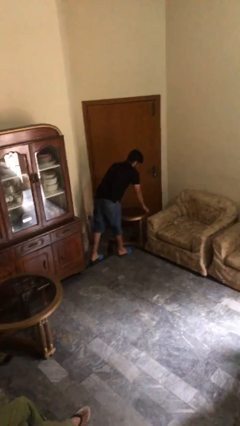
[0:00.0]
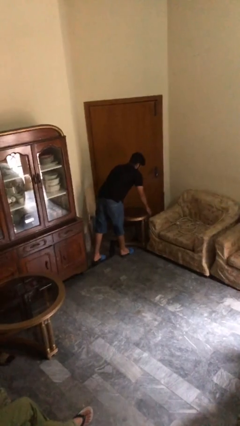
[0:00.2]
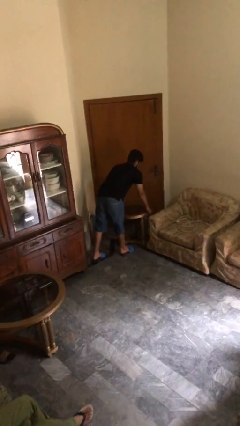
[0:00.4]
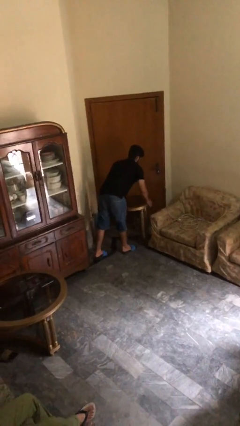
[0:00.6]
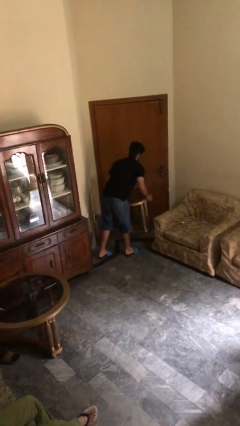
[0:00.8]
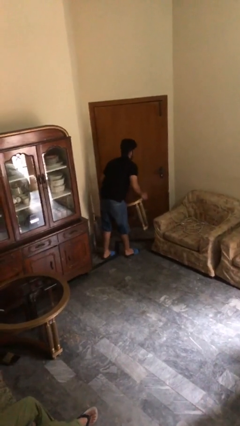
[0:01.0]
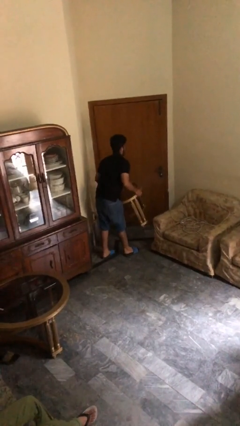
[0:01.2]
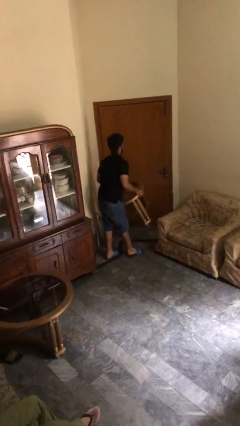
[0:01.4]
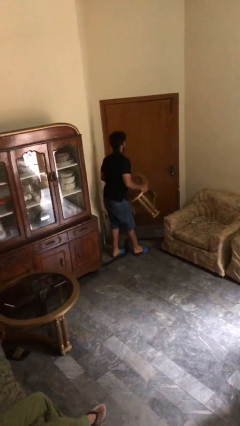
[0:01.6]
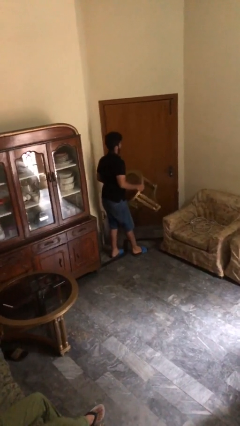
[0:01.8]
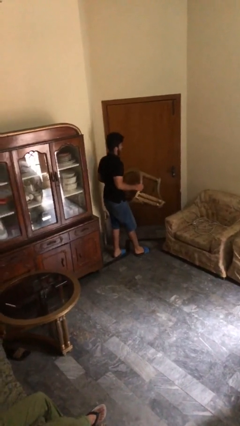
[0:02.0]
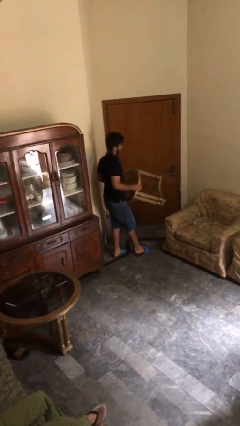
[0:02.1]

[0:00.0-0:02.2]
person picks up object from floor

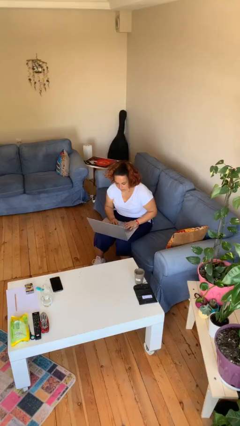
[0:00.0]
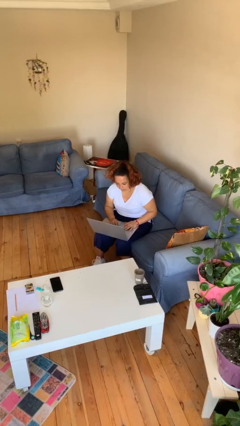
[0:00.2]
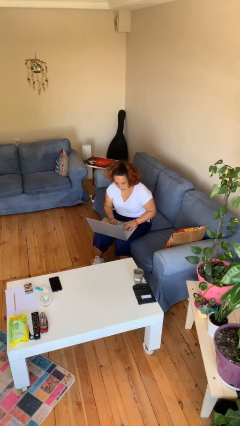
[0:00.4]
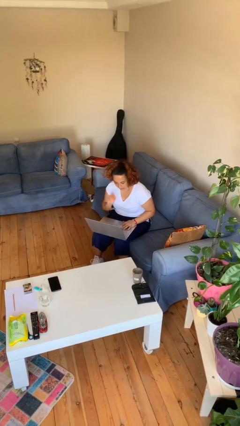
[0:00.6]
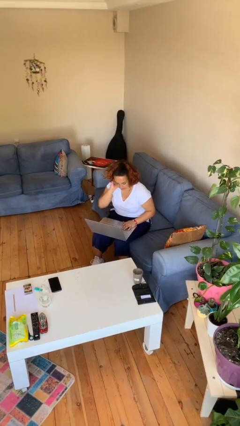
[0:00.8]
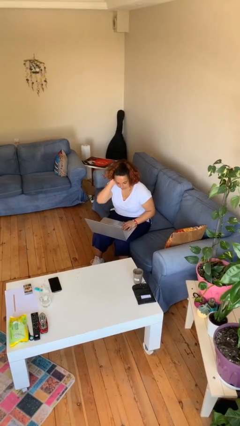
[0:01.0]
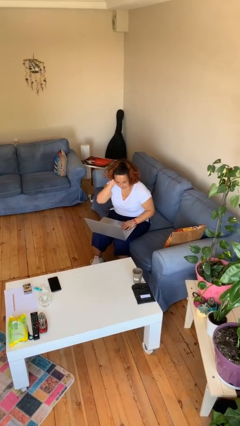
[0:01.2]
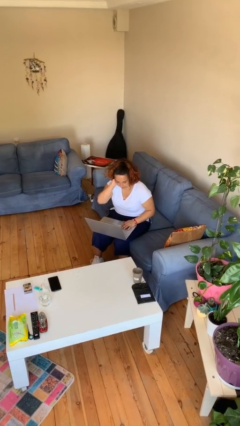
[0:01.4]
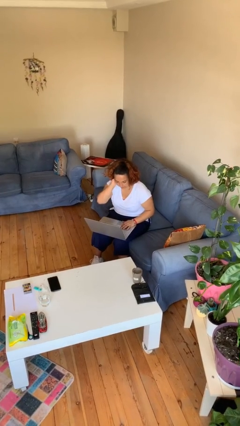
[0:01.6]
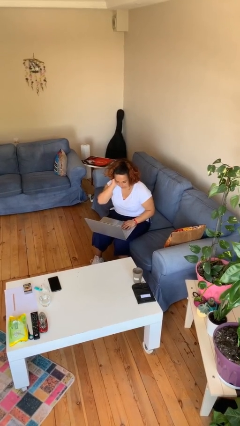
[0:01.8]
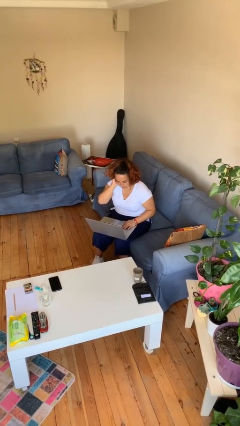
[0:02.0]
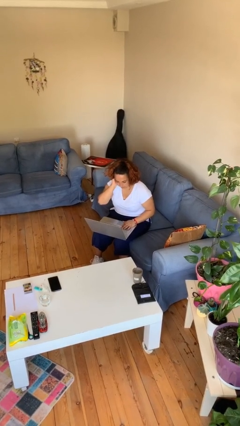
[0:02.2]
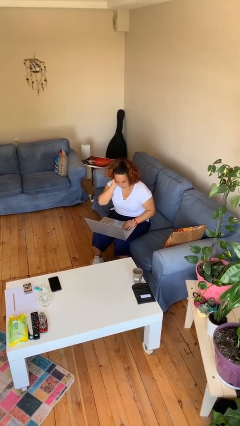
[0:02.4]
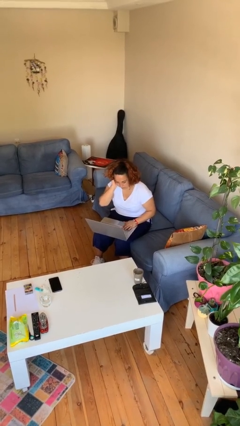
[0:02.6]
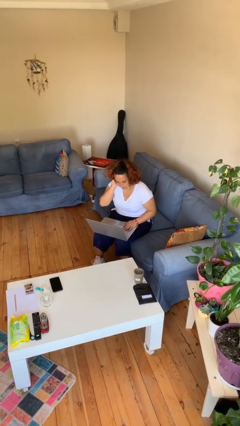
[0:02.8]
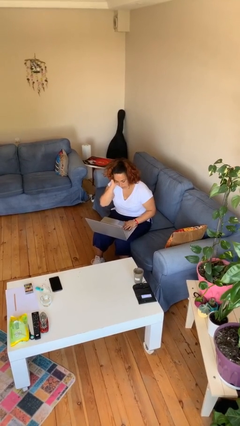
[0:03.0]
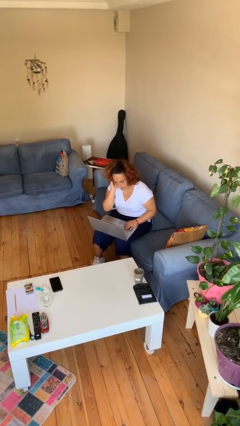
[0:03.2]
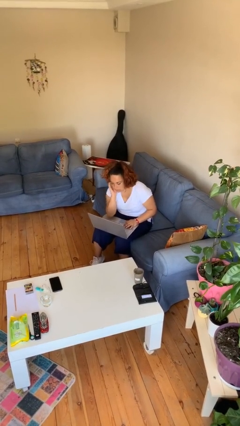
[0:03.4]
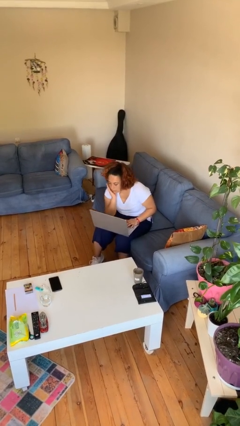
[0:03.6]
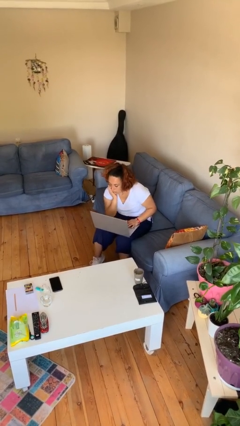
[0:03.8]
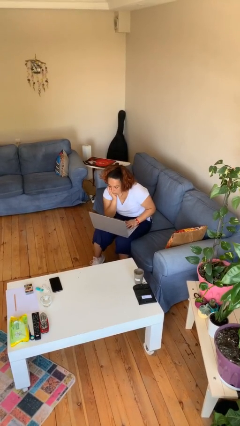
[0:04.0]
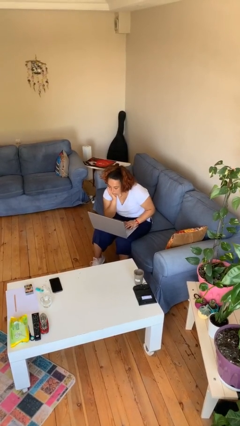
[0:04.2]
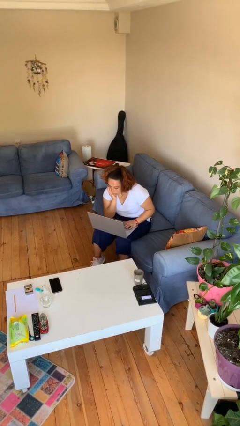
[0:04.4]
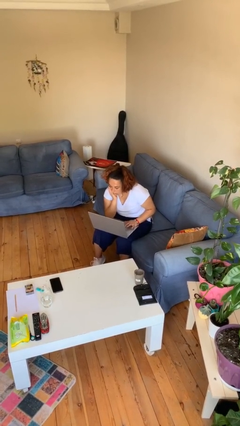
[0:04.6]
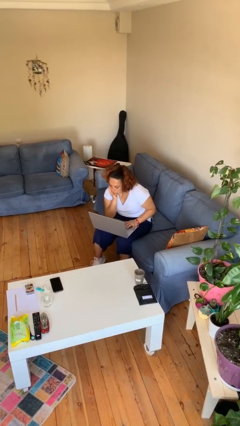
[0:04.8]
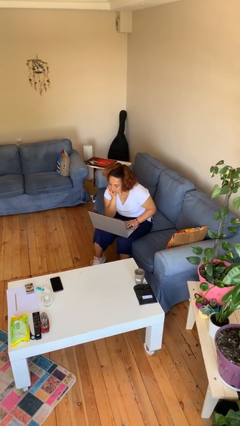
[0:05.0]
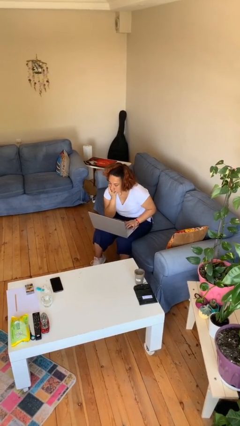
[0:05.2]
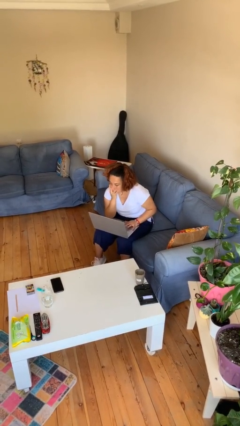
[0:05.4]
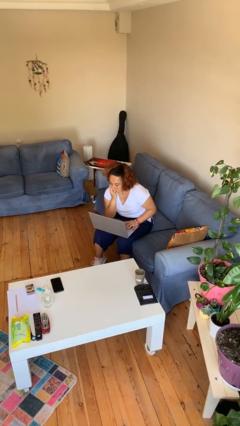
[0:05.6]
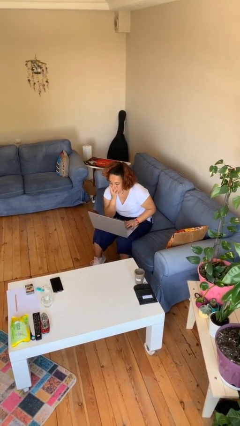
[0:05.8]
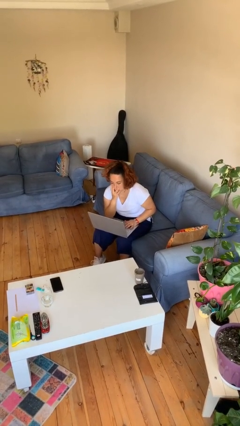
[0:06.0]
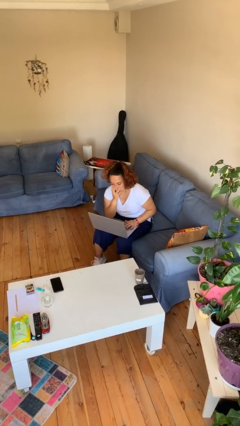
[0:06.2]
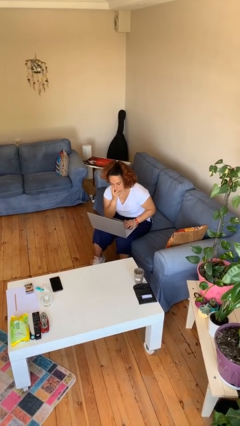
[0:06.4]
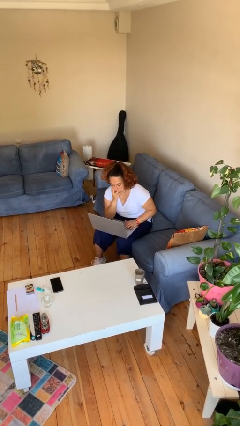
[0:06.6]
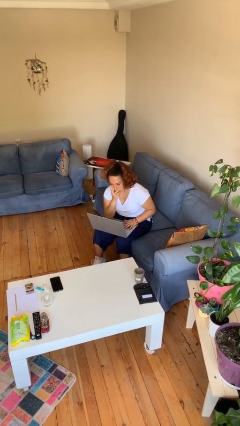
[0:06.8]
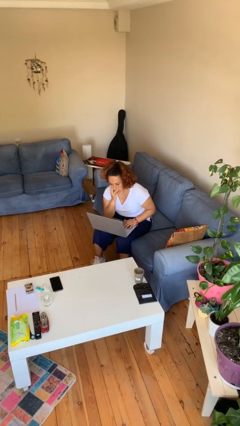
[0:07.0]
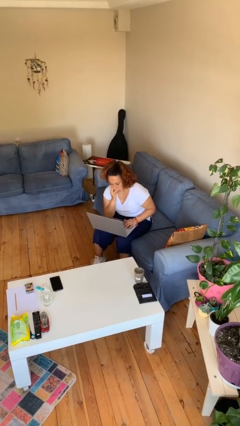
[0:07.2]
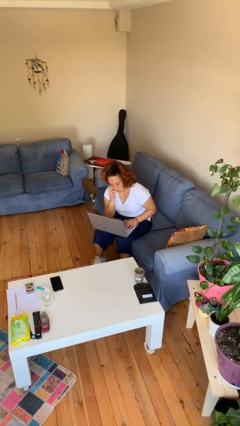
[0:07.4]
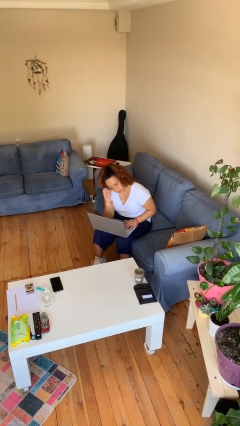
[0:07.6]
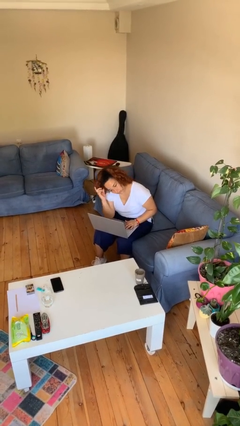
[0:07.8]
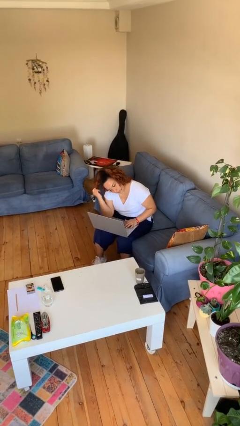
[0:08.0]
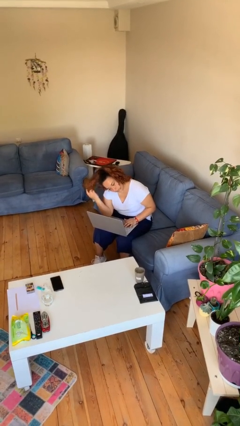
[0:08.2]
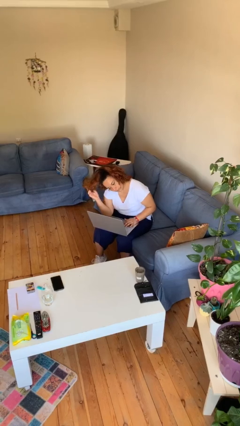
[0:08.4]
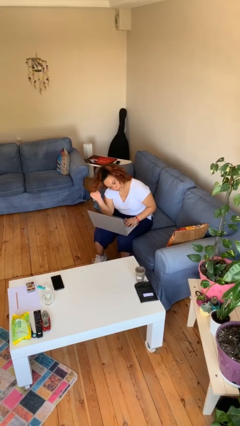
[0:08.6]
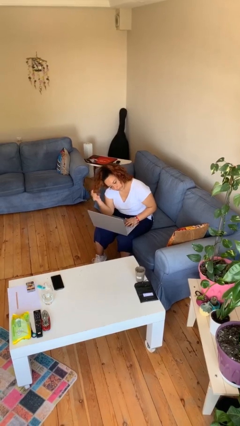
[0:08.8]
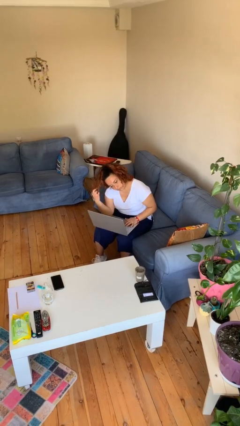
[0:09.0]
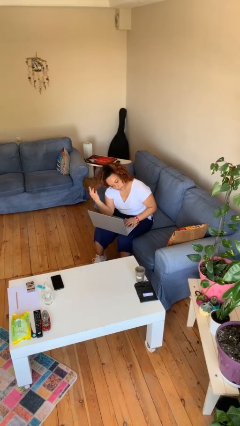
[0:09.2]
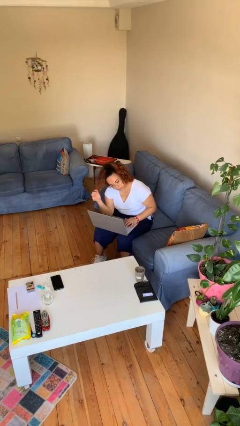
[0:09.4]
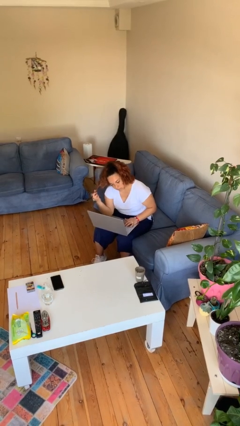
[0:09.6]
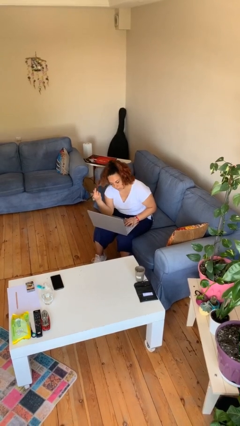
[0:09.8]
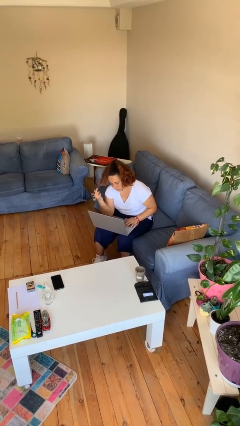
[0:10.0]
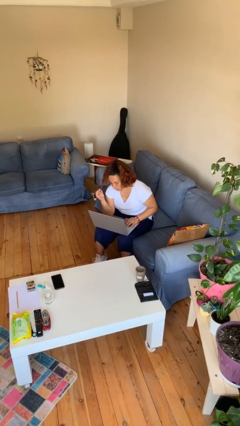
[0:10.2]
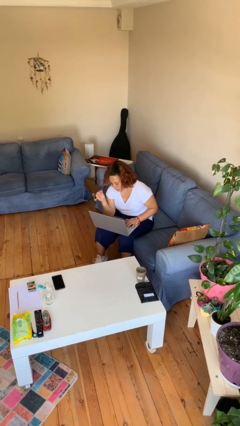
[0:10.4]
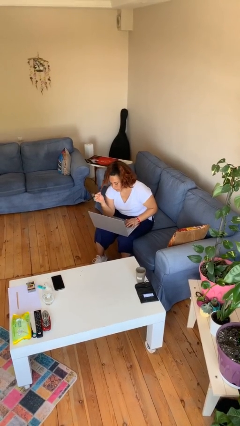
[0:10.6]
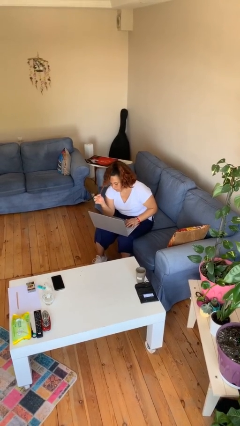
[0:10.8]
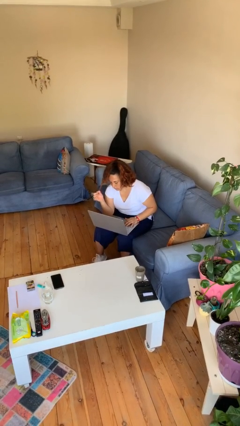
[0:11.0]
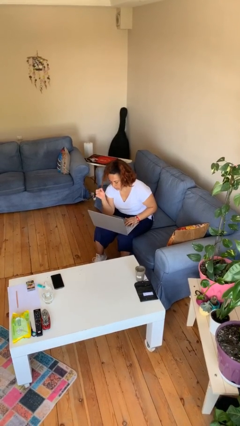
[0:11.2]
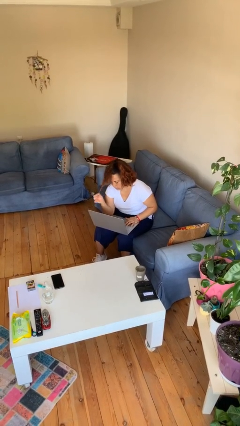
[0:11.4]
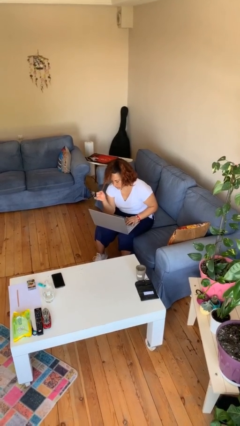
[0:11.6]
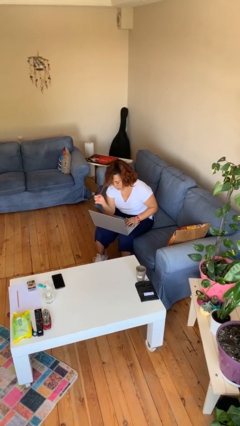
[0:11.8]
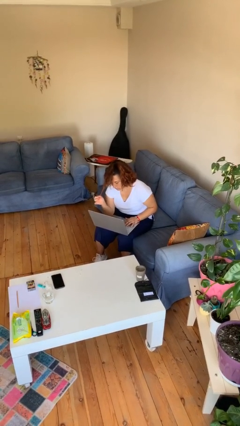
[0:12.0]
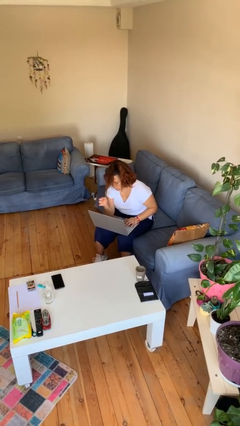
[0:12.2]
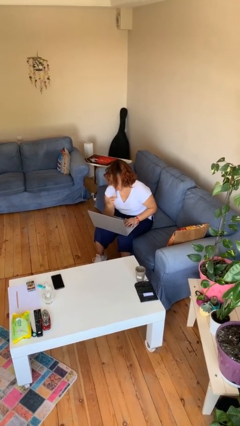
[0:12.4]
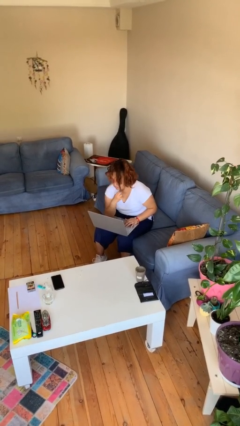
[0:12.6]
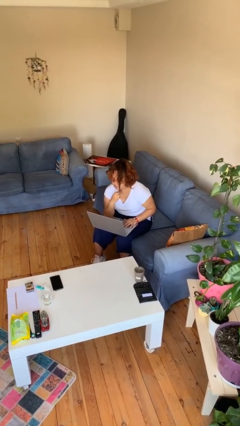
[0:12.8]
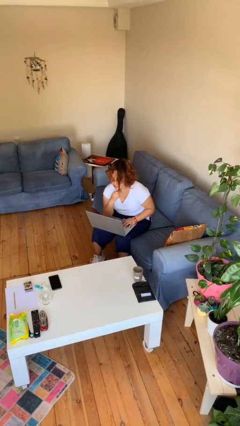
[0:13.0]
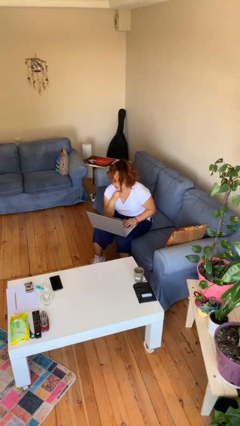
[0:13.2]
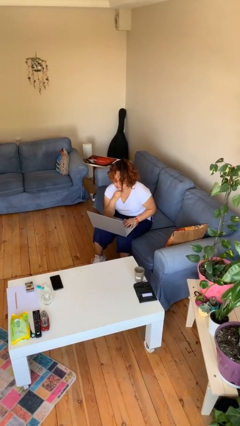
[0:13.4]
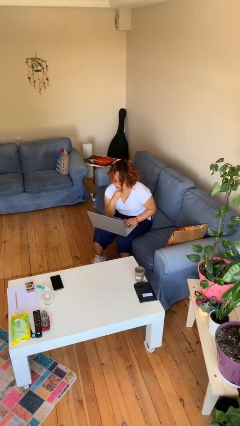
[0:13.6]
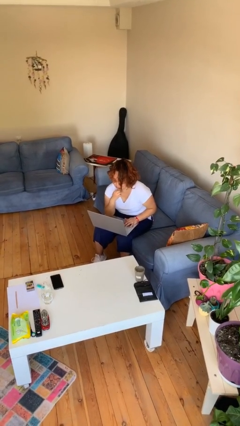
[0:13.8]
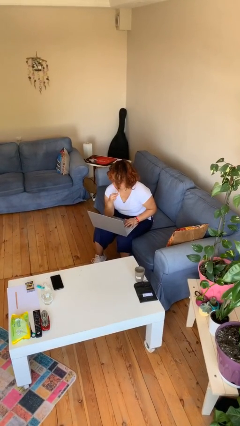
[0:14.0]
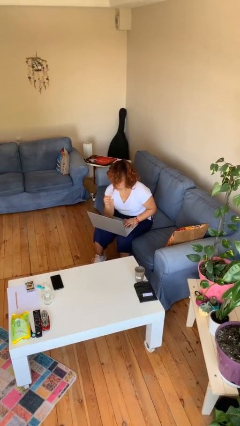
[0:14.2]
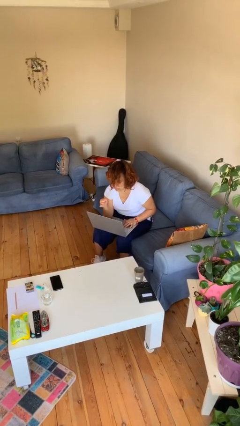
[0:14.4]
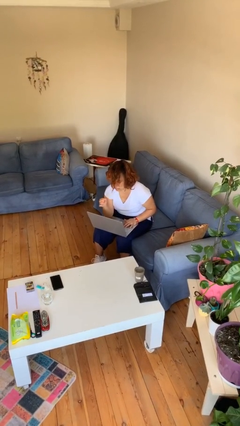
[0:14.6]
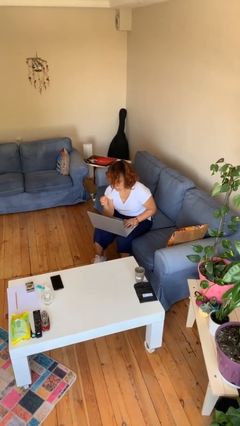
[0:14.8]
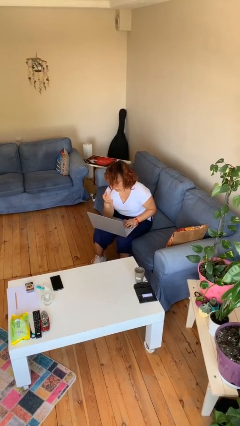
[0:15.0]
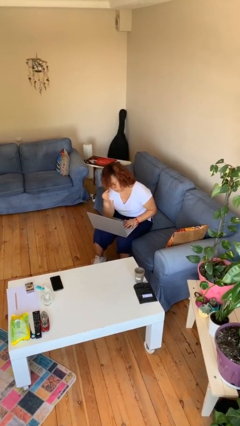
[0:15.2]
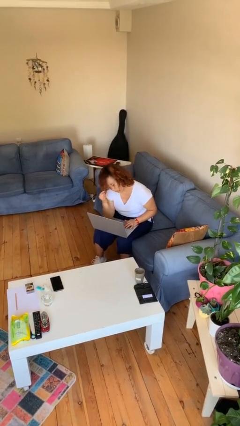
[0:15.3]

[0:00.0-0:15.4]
person interacts with laptop
